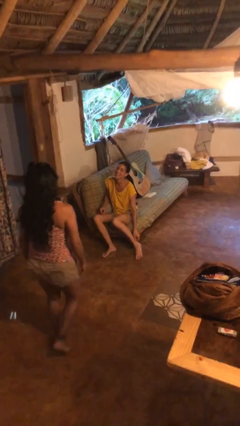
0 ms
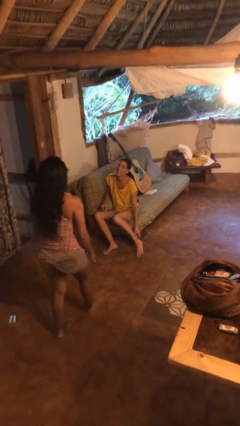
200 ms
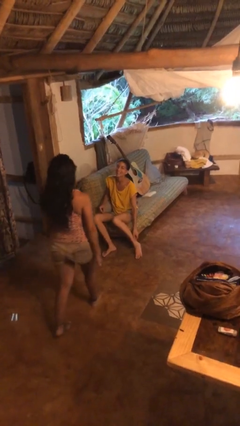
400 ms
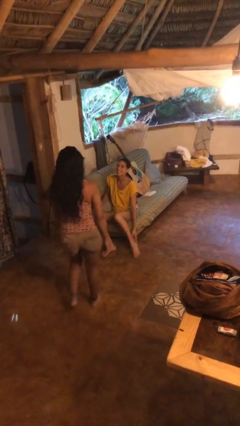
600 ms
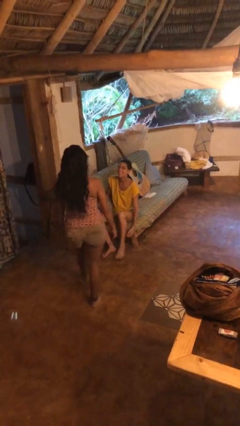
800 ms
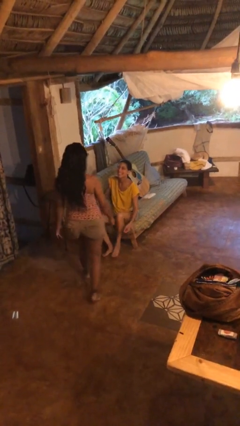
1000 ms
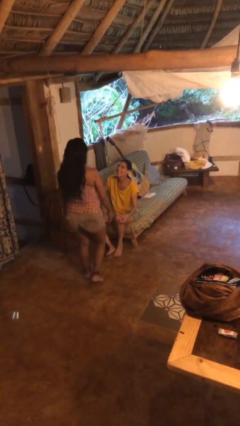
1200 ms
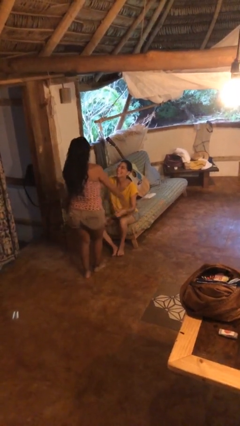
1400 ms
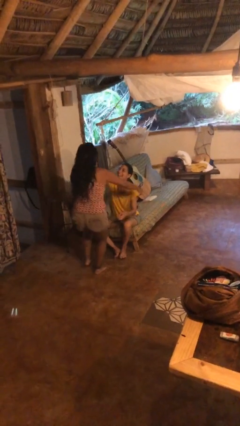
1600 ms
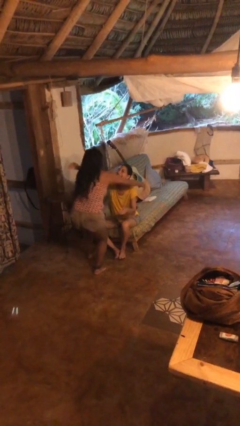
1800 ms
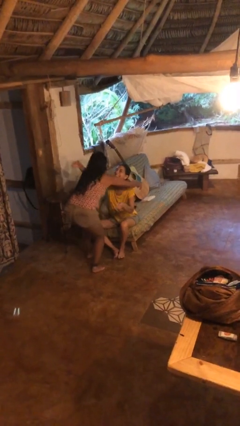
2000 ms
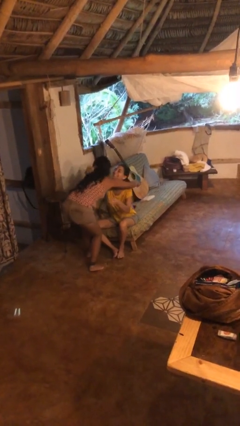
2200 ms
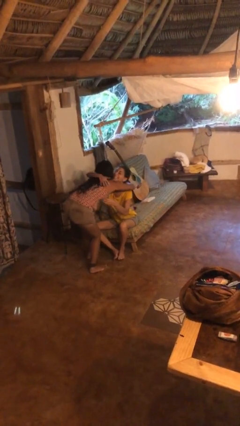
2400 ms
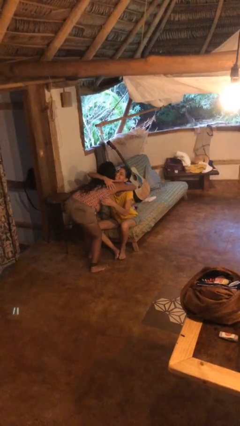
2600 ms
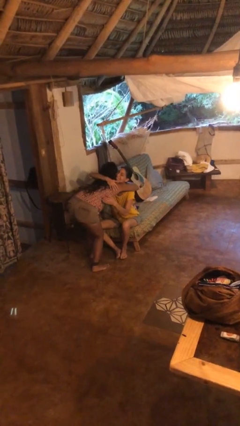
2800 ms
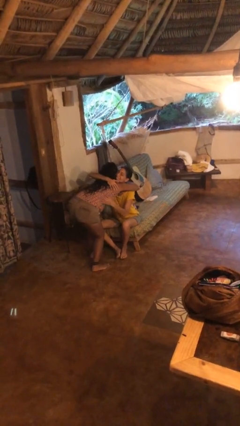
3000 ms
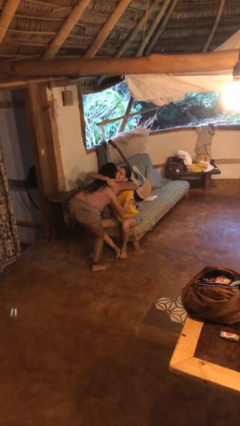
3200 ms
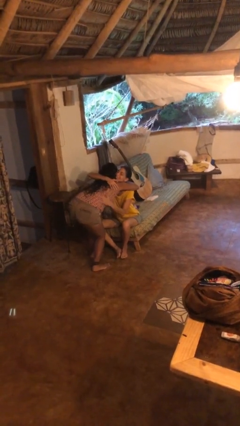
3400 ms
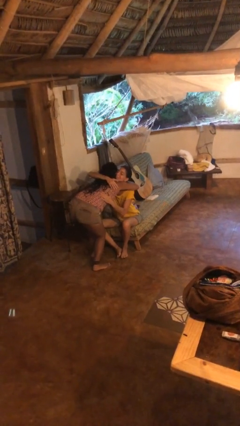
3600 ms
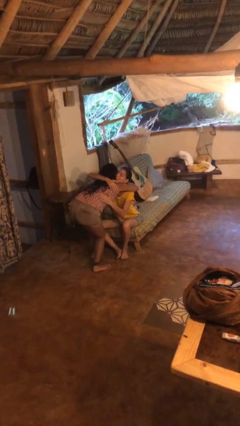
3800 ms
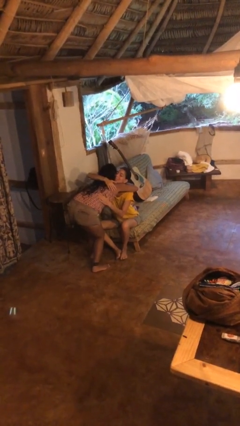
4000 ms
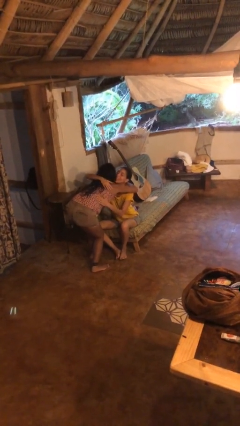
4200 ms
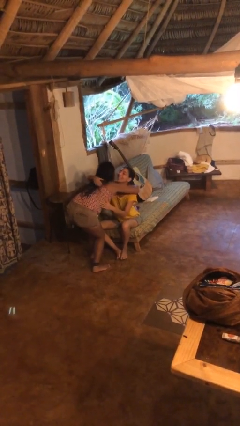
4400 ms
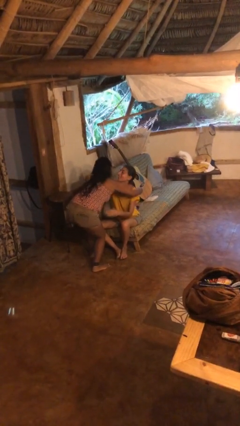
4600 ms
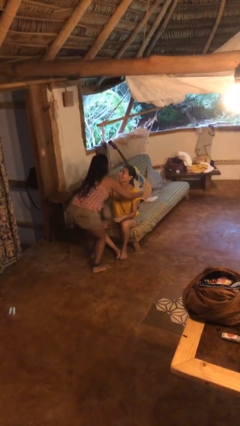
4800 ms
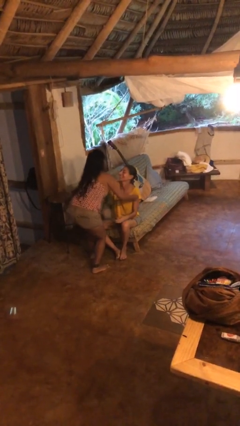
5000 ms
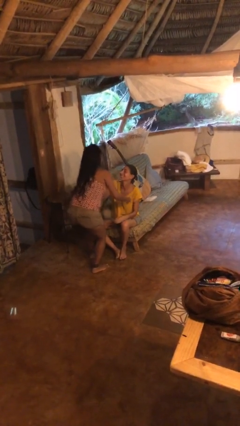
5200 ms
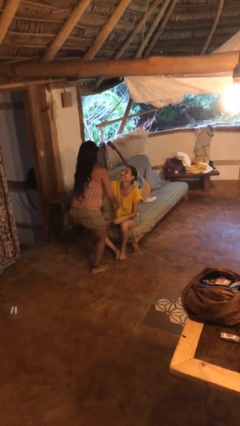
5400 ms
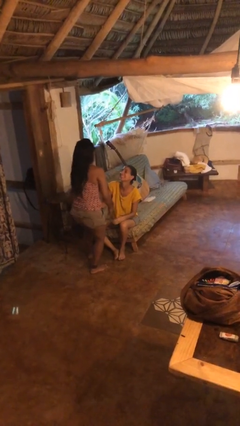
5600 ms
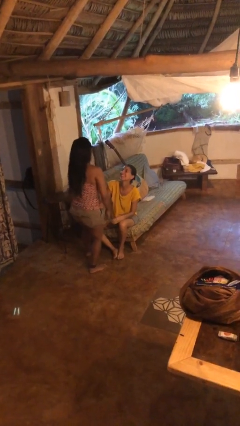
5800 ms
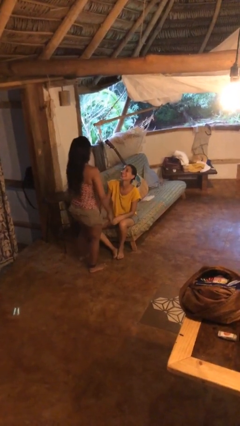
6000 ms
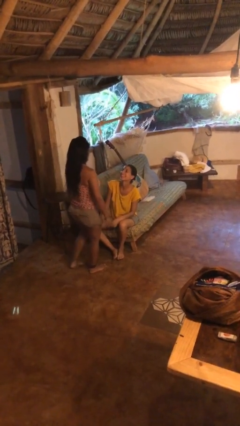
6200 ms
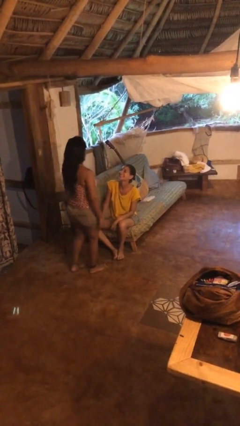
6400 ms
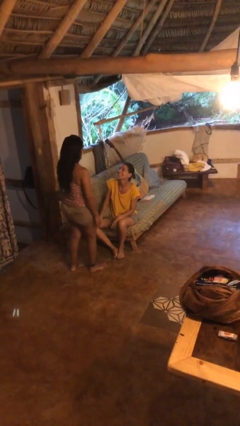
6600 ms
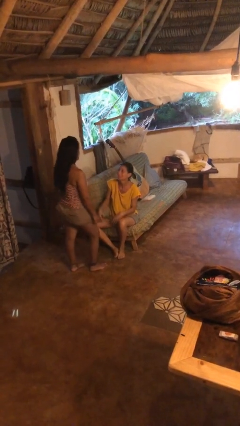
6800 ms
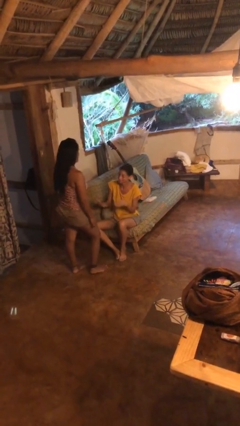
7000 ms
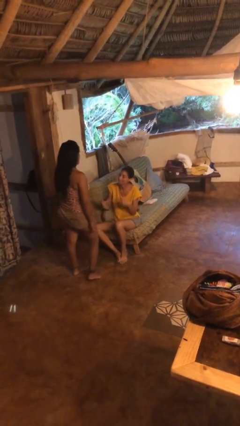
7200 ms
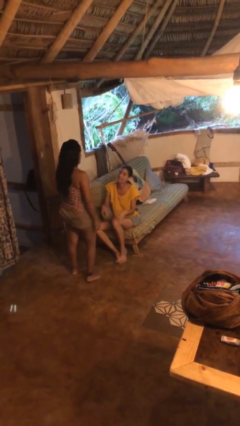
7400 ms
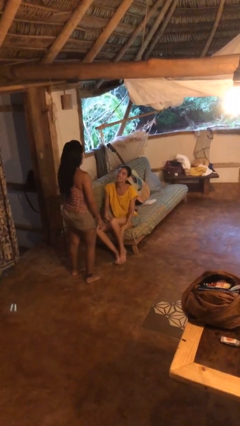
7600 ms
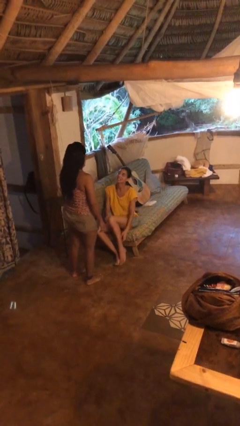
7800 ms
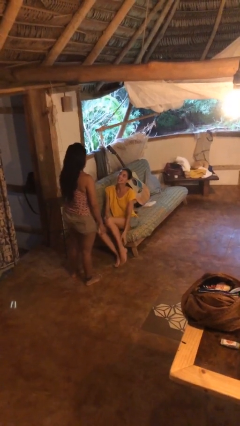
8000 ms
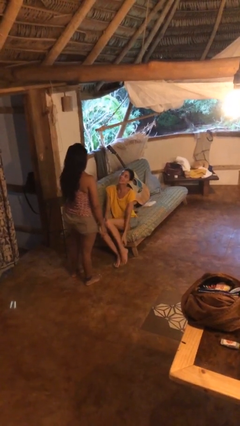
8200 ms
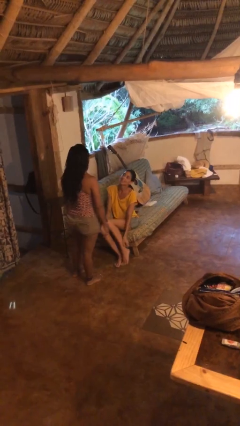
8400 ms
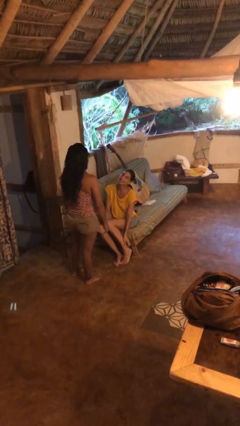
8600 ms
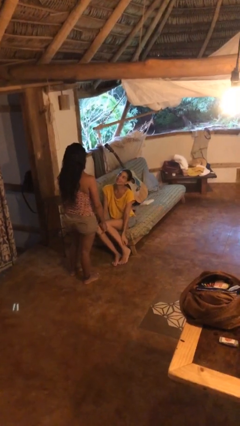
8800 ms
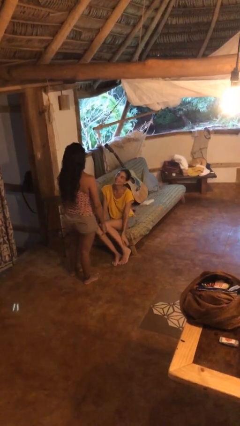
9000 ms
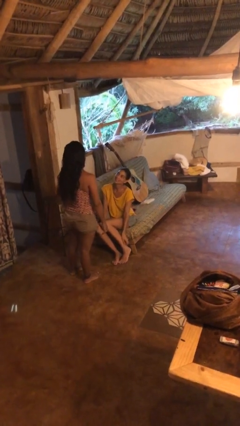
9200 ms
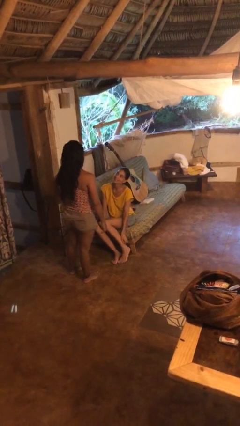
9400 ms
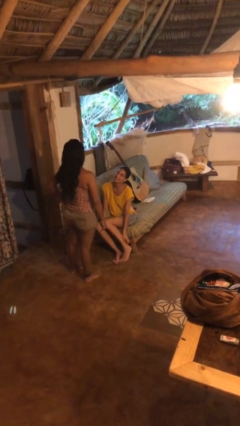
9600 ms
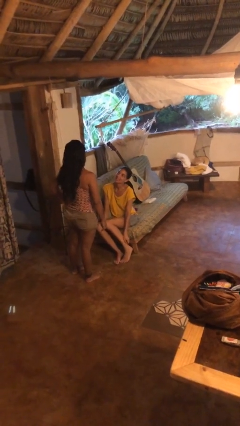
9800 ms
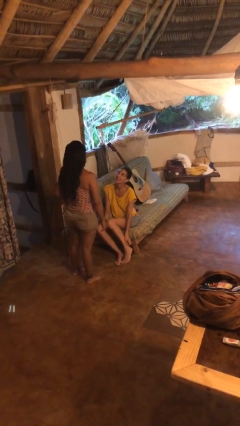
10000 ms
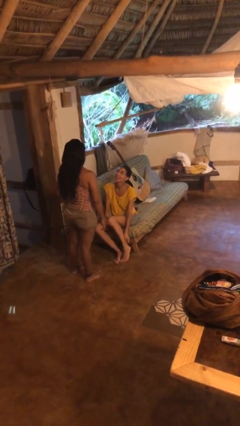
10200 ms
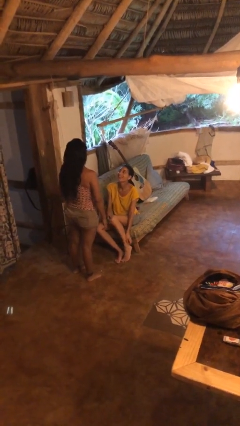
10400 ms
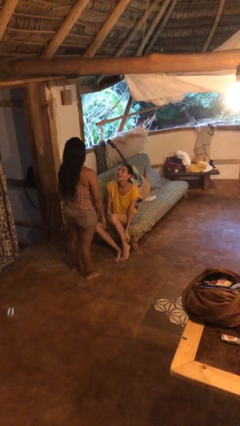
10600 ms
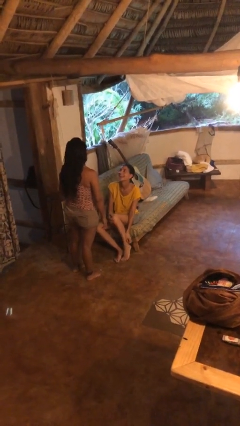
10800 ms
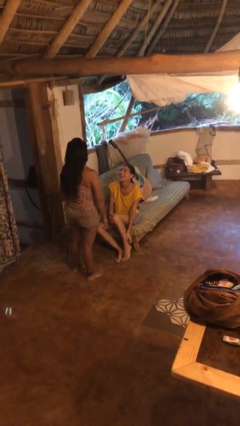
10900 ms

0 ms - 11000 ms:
person embraces person

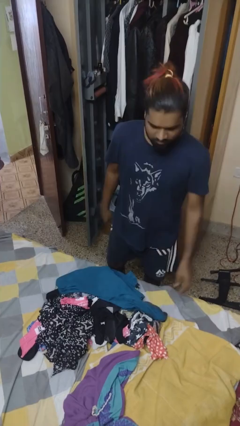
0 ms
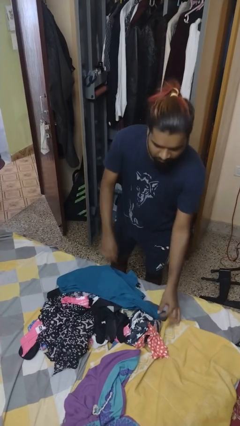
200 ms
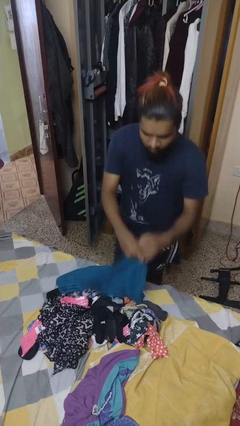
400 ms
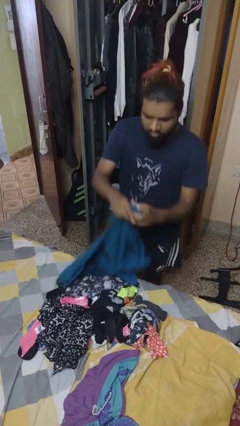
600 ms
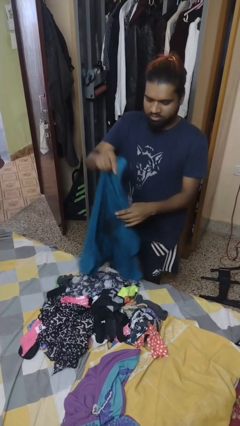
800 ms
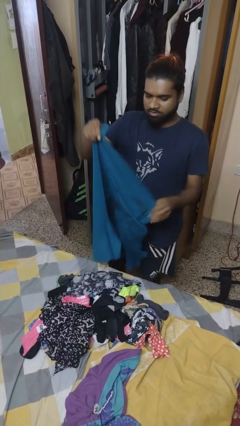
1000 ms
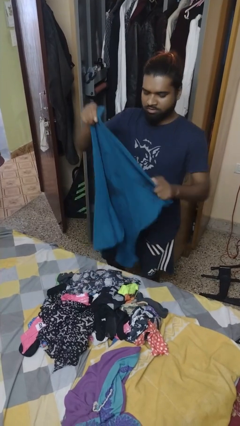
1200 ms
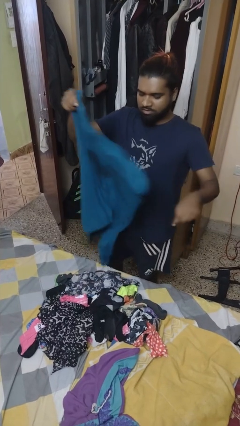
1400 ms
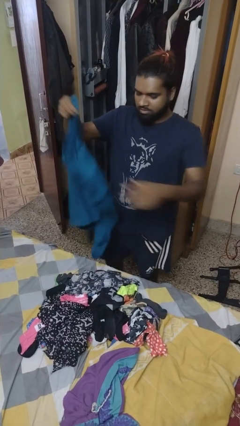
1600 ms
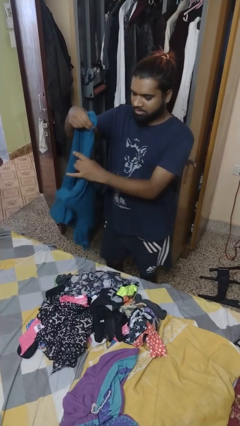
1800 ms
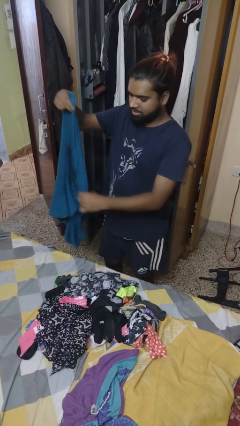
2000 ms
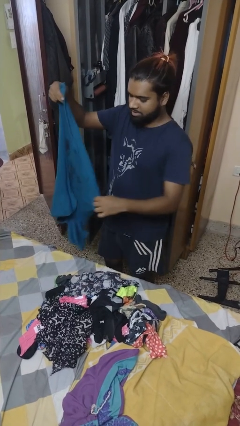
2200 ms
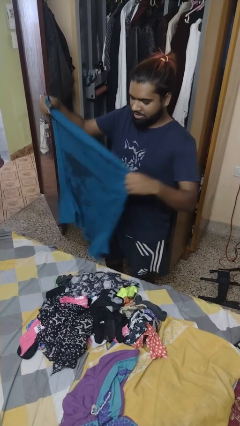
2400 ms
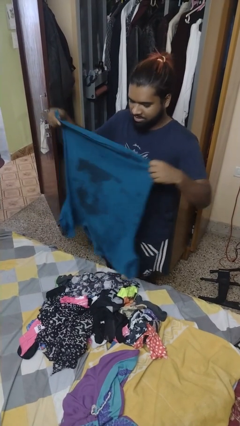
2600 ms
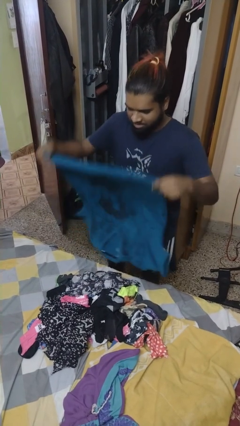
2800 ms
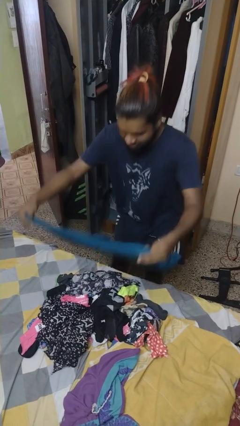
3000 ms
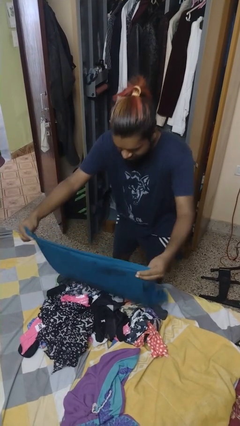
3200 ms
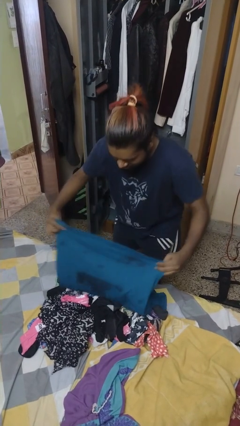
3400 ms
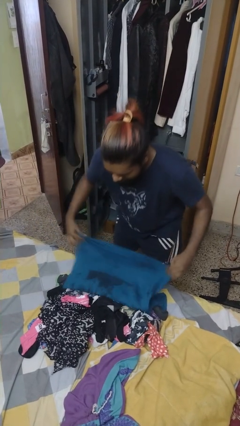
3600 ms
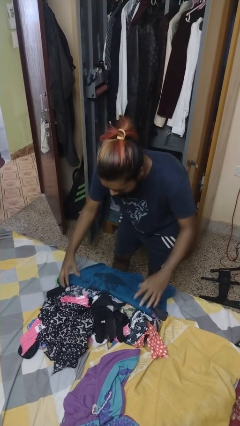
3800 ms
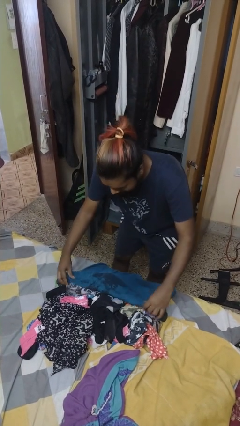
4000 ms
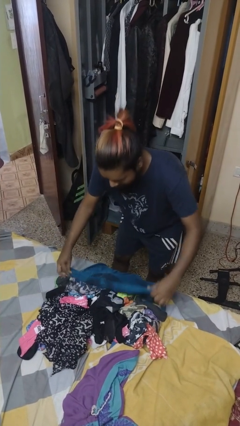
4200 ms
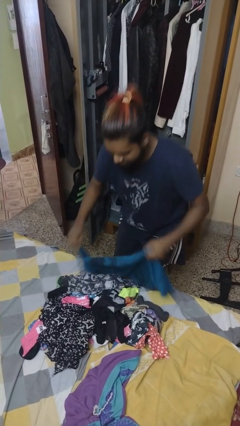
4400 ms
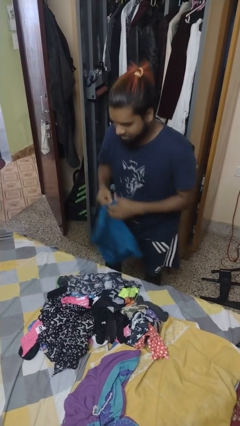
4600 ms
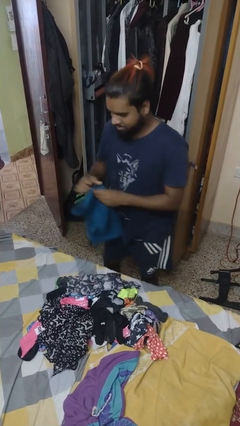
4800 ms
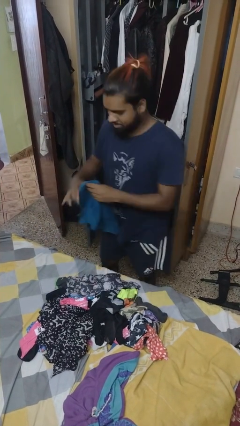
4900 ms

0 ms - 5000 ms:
person folds shirt

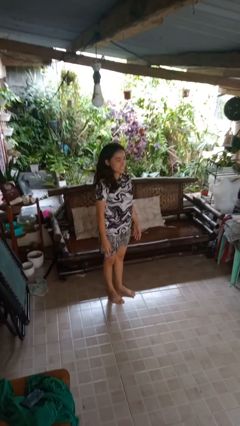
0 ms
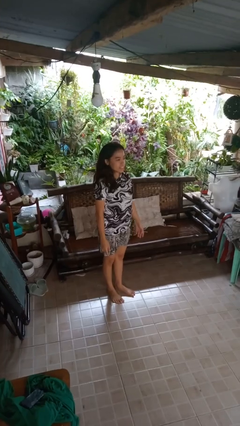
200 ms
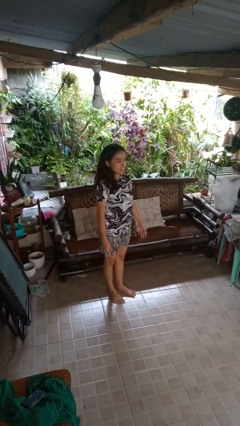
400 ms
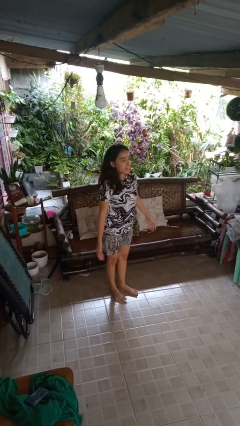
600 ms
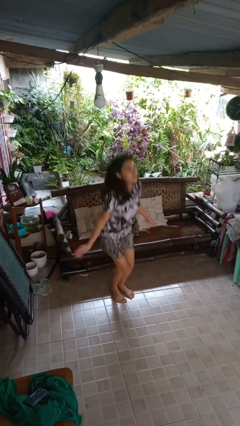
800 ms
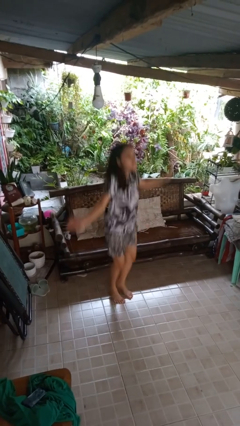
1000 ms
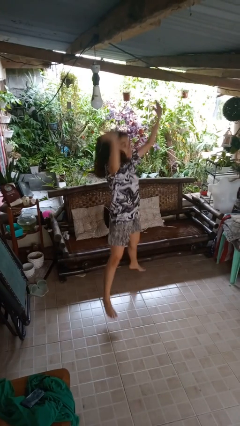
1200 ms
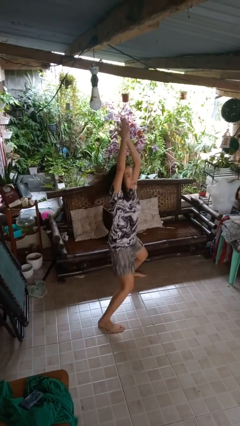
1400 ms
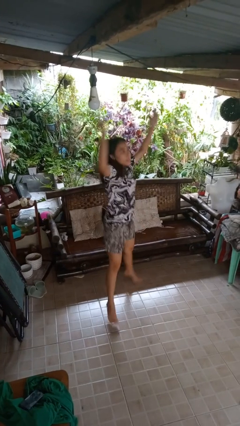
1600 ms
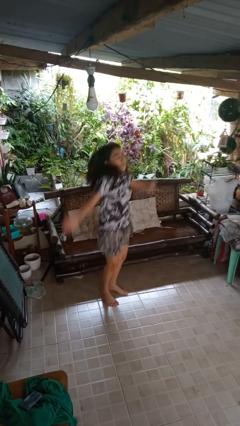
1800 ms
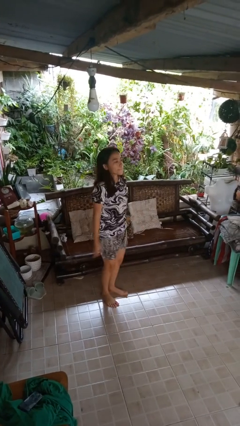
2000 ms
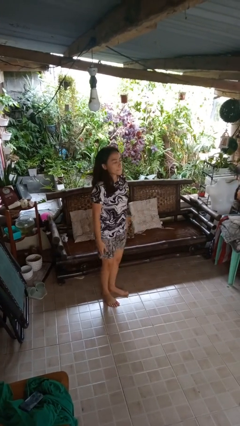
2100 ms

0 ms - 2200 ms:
person exercises with jumping jacks
